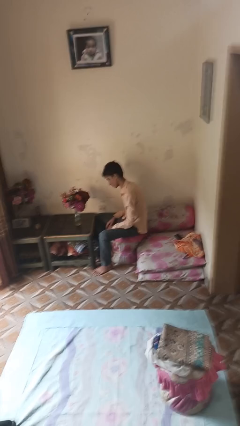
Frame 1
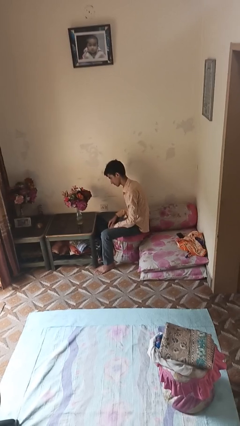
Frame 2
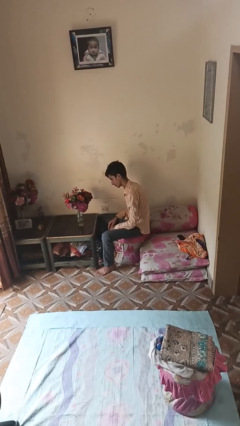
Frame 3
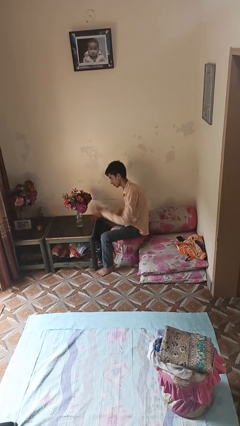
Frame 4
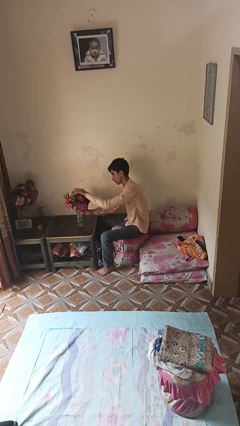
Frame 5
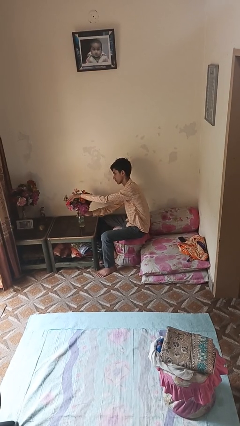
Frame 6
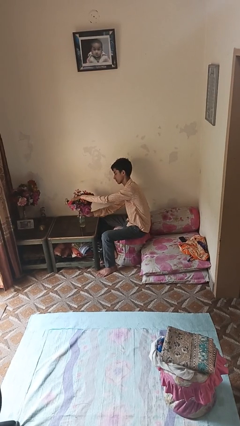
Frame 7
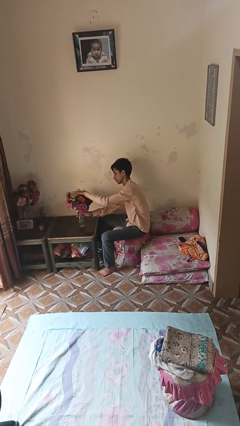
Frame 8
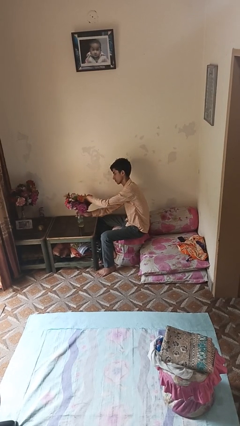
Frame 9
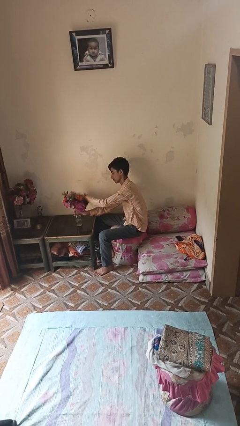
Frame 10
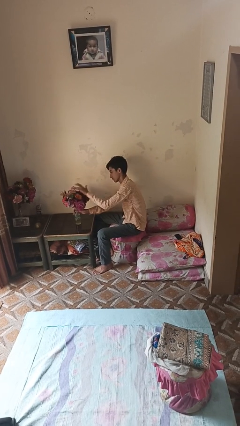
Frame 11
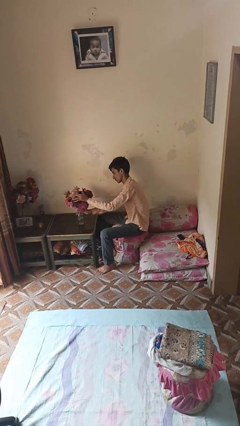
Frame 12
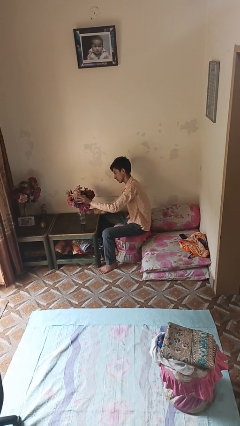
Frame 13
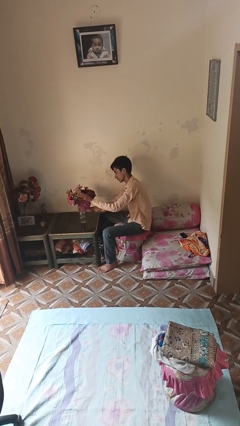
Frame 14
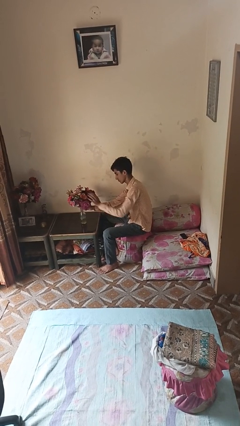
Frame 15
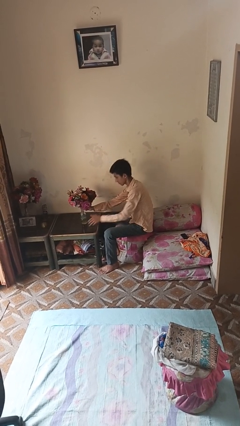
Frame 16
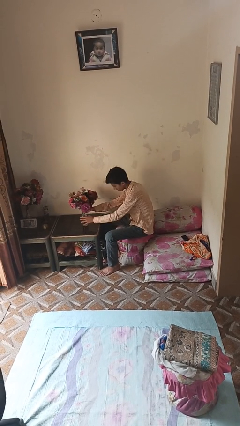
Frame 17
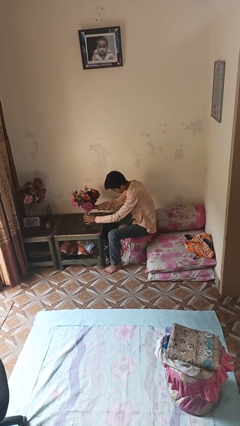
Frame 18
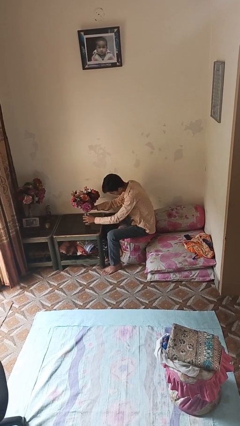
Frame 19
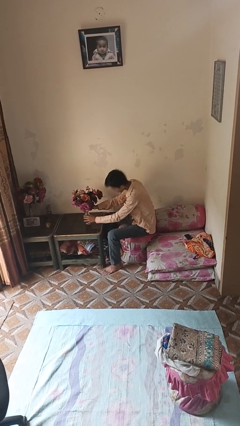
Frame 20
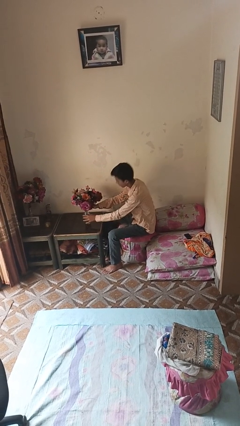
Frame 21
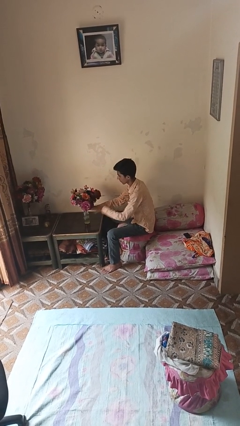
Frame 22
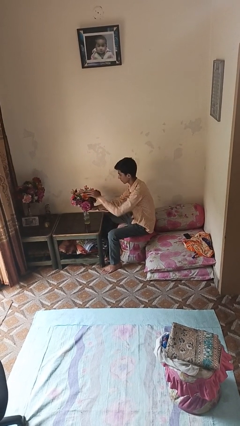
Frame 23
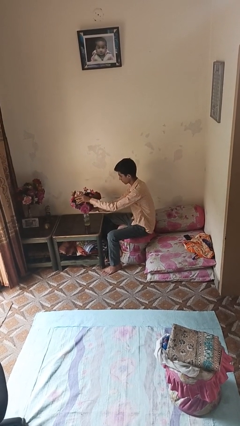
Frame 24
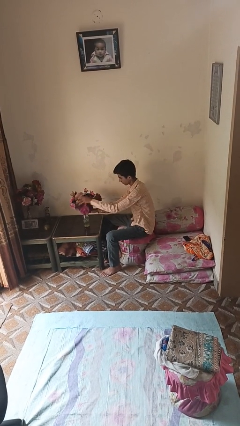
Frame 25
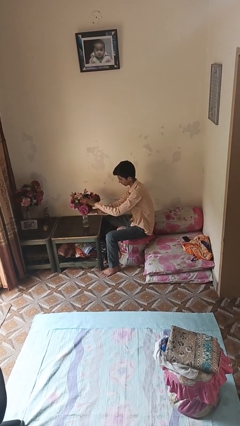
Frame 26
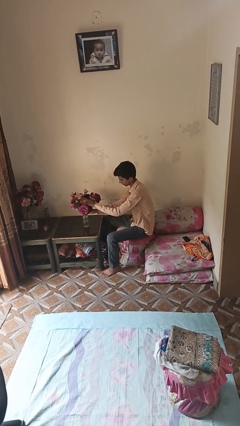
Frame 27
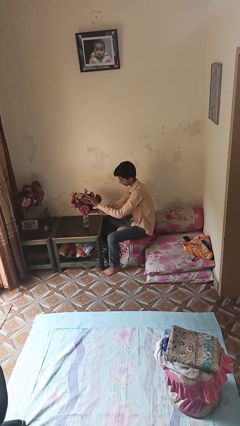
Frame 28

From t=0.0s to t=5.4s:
person arranges flowers in vase

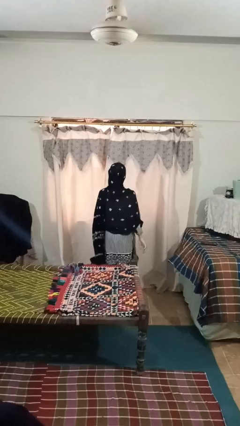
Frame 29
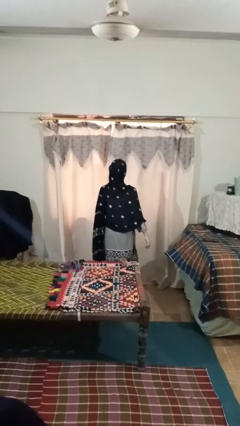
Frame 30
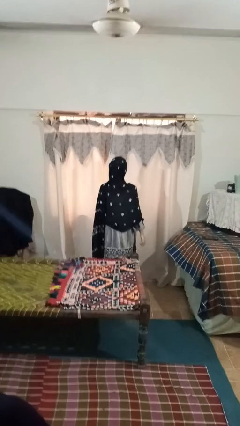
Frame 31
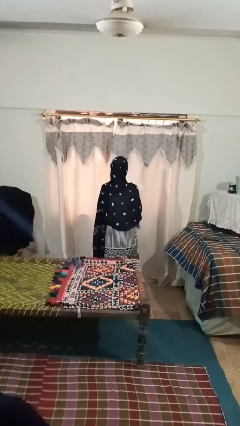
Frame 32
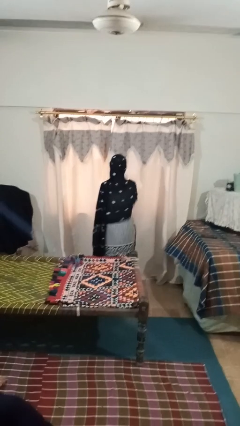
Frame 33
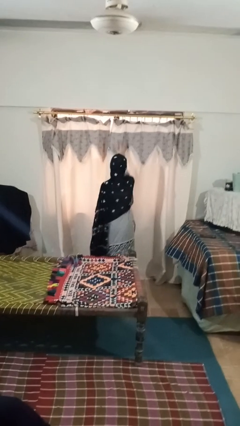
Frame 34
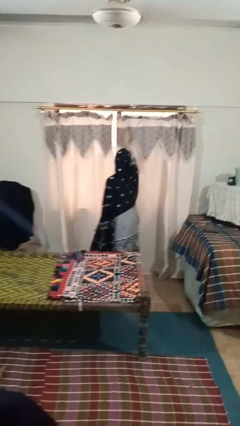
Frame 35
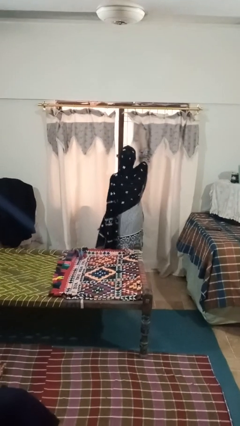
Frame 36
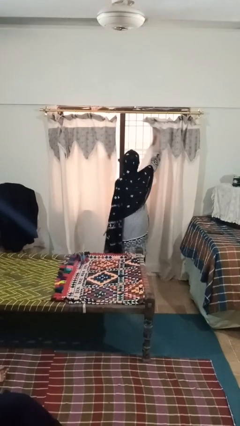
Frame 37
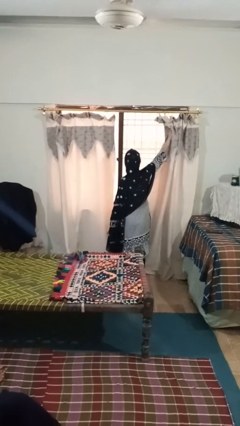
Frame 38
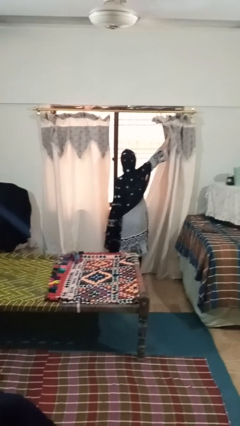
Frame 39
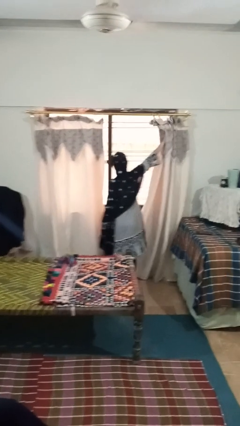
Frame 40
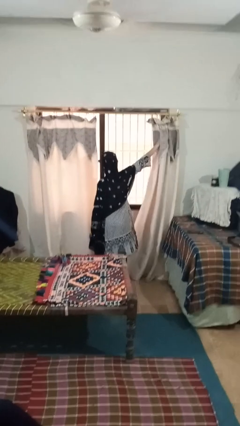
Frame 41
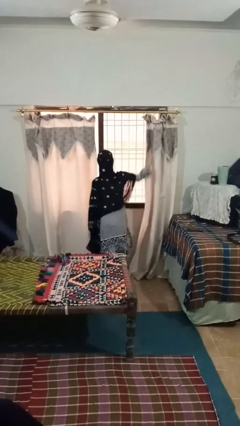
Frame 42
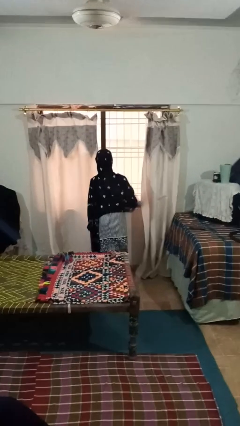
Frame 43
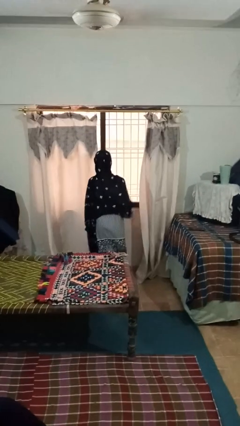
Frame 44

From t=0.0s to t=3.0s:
person opens curtains

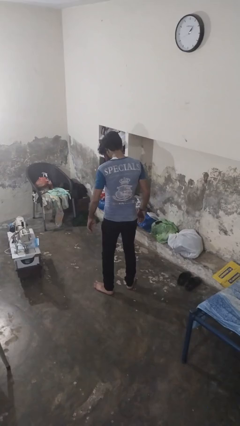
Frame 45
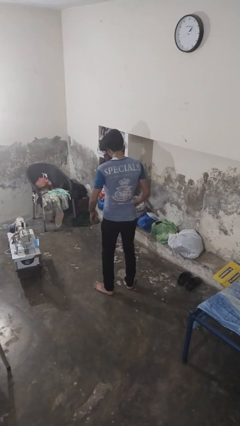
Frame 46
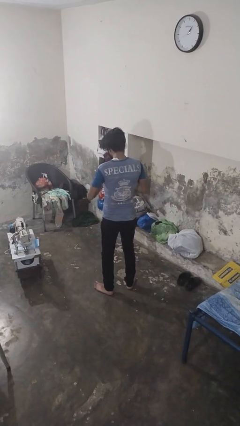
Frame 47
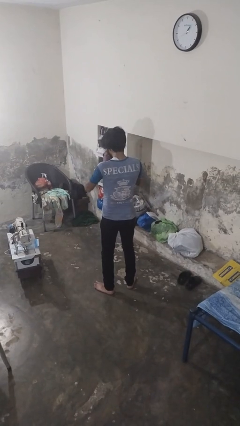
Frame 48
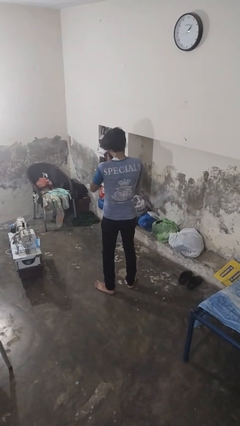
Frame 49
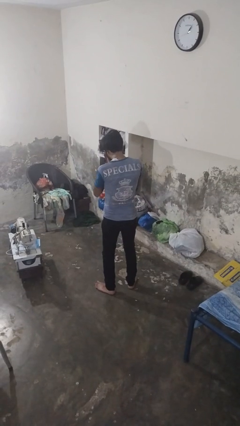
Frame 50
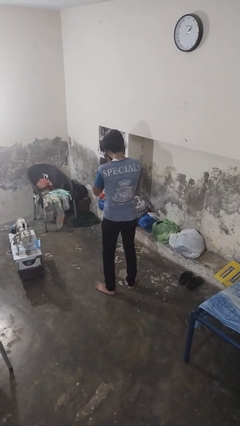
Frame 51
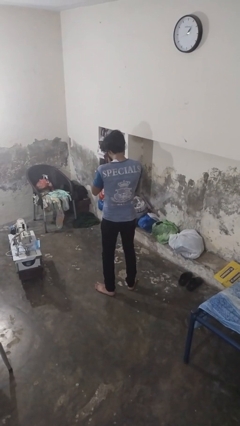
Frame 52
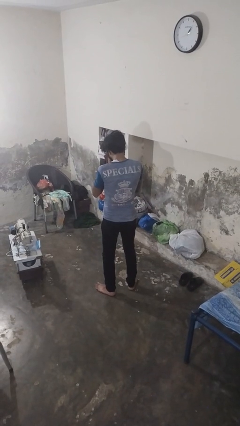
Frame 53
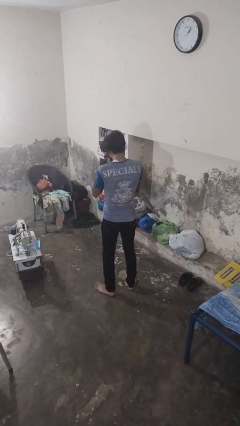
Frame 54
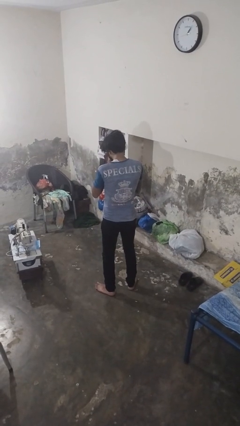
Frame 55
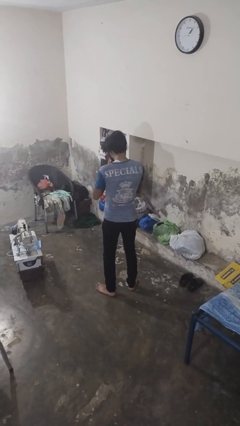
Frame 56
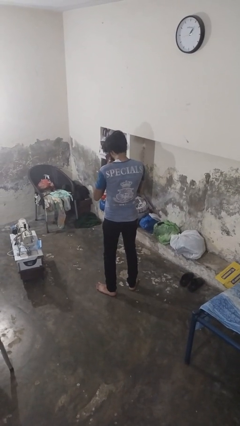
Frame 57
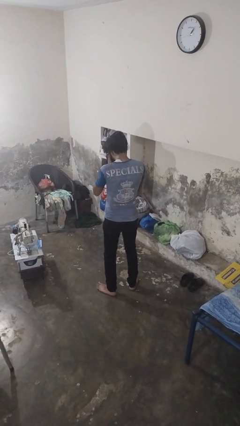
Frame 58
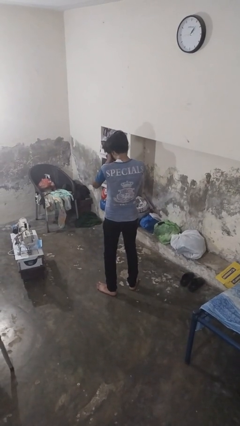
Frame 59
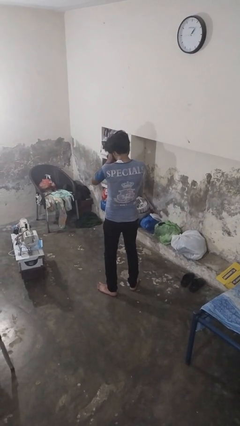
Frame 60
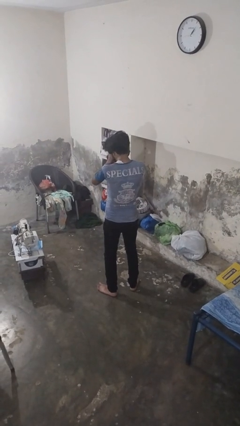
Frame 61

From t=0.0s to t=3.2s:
person sneezes into hand

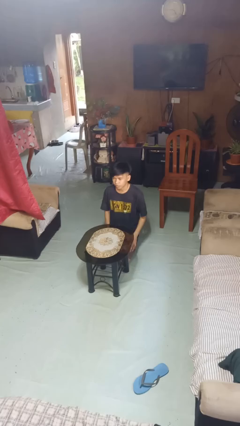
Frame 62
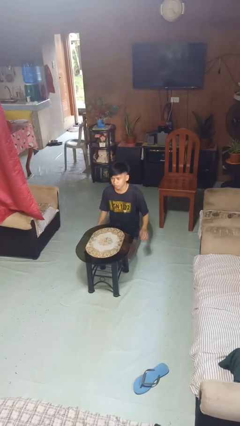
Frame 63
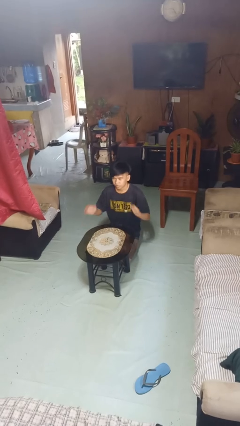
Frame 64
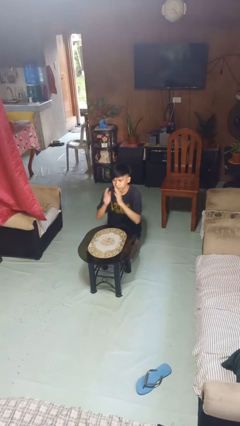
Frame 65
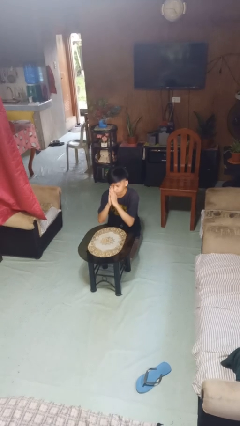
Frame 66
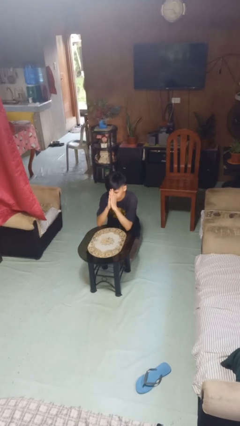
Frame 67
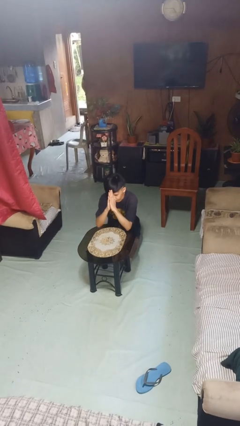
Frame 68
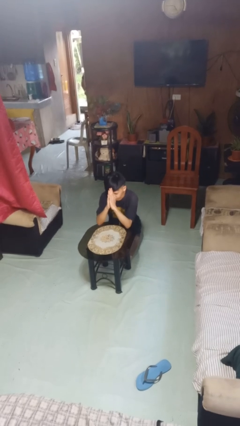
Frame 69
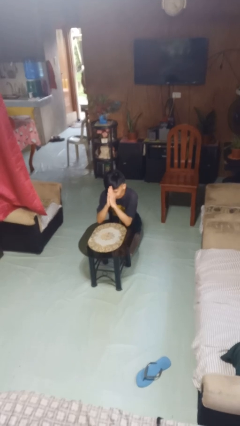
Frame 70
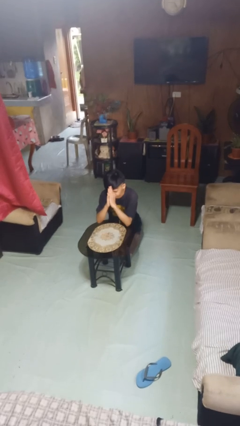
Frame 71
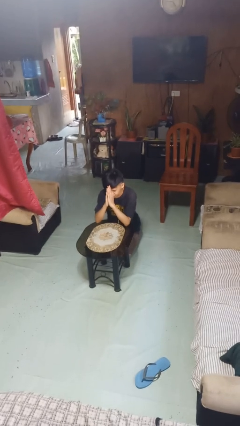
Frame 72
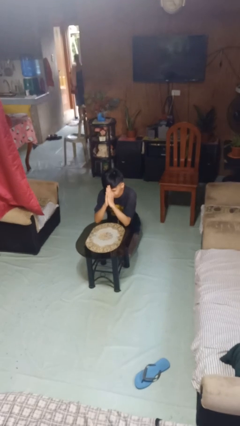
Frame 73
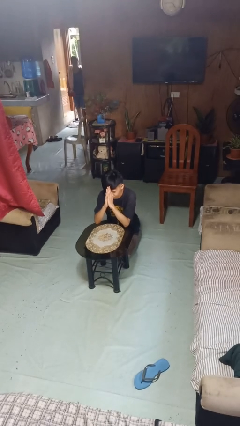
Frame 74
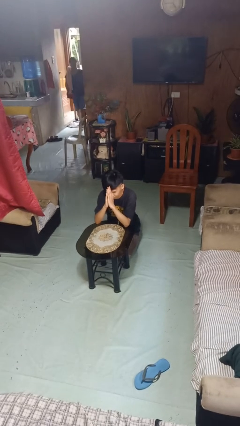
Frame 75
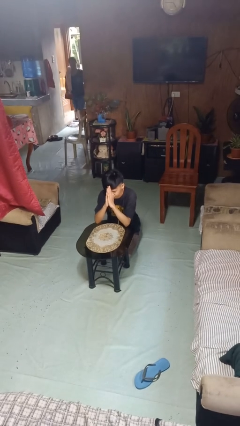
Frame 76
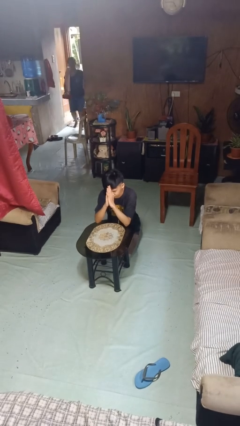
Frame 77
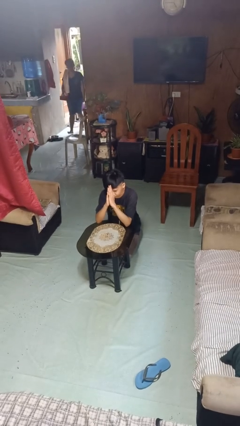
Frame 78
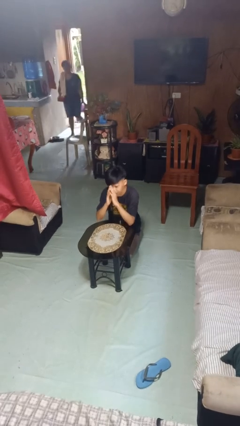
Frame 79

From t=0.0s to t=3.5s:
person prays

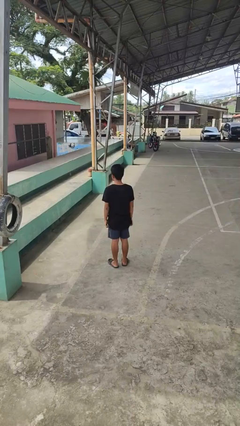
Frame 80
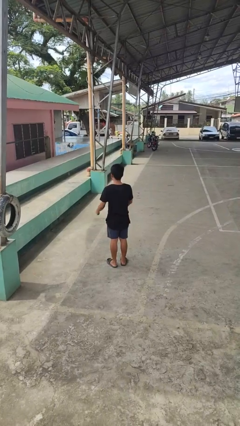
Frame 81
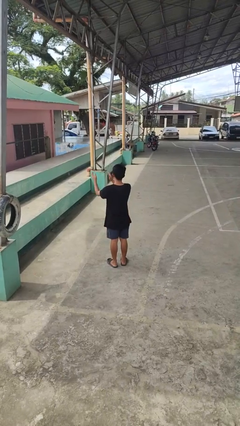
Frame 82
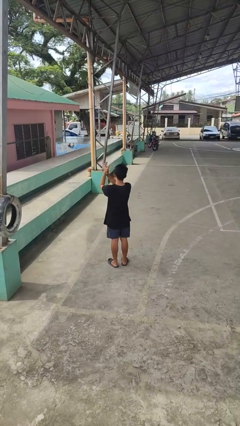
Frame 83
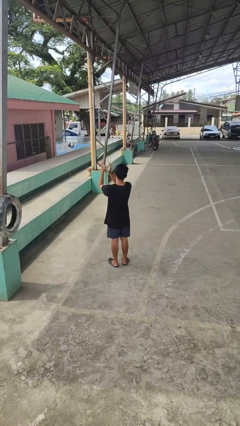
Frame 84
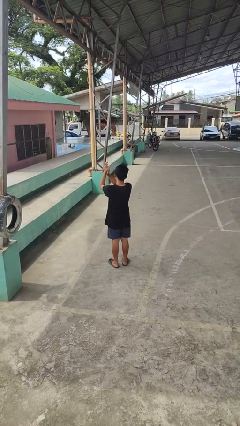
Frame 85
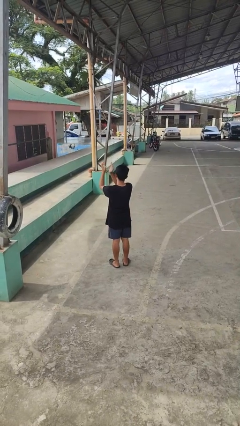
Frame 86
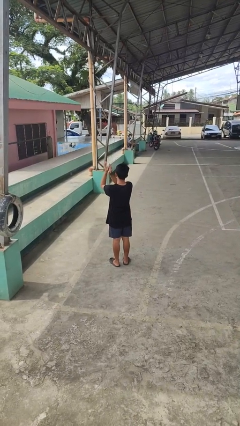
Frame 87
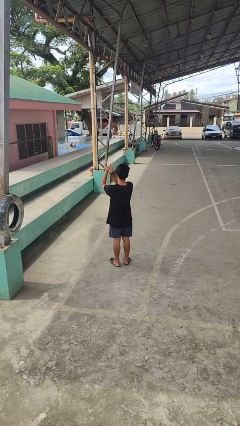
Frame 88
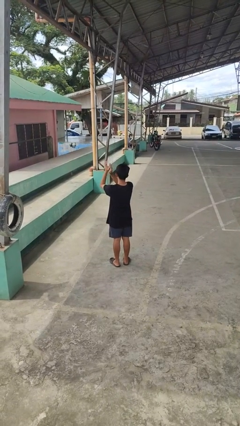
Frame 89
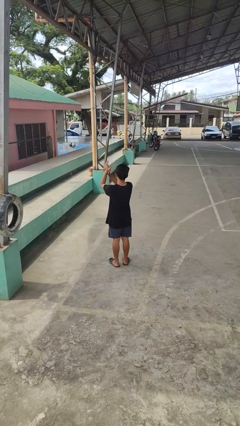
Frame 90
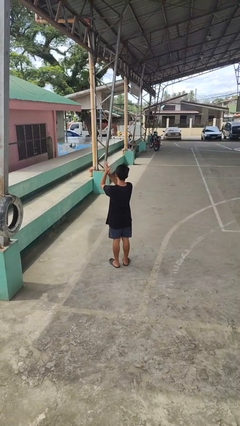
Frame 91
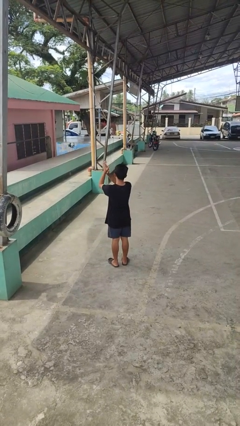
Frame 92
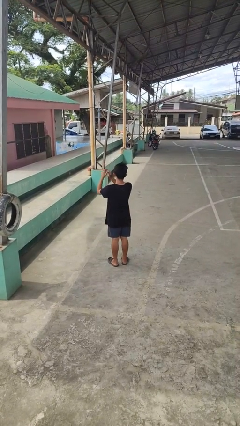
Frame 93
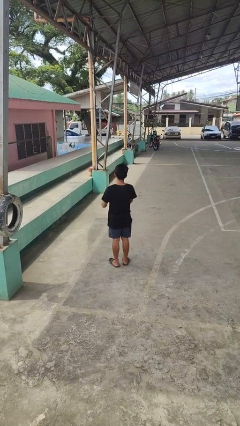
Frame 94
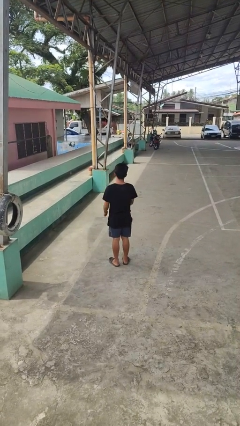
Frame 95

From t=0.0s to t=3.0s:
person claps hands
